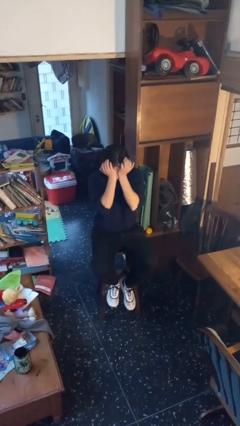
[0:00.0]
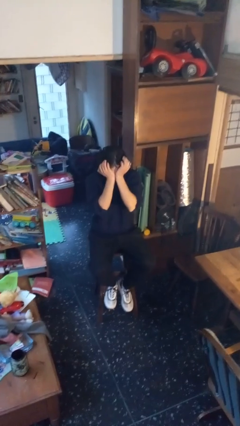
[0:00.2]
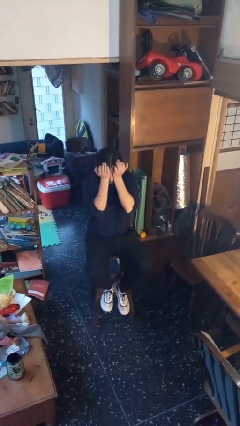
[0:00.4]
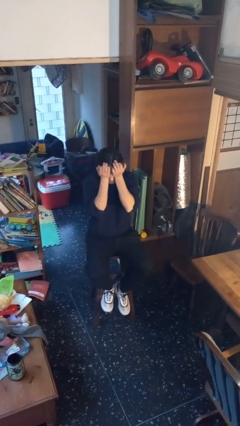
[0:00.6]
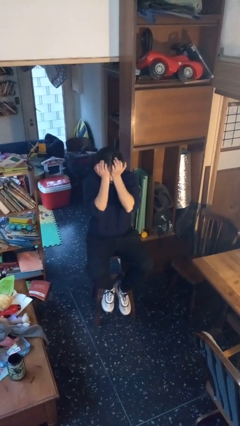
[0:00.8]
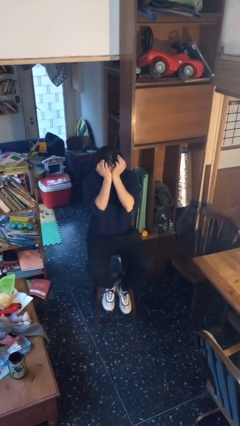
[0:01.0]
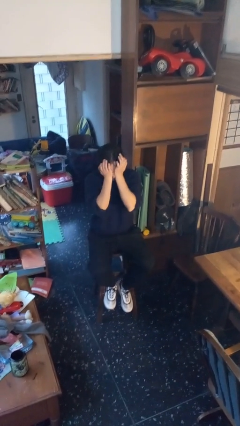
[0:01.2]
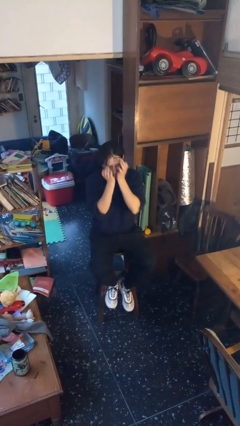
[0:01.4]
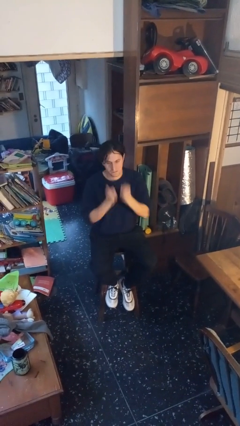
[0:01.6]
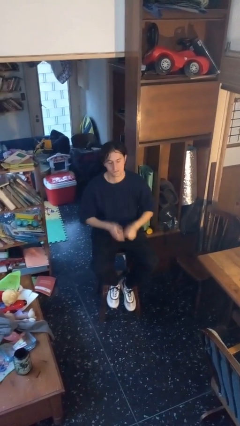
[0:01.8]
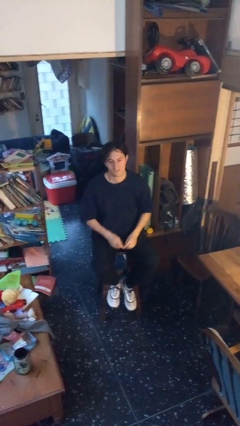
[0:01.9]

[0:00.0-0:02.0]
person rubs eyes

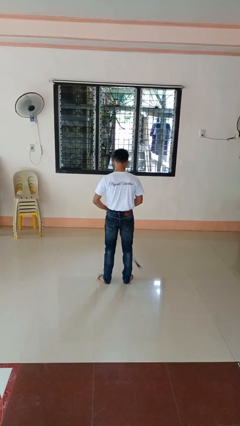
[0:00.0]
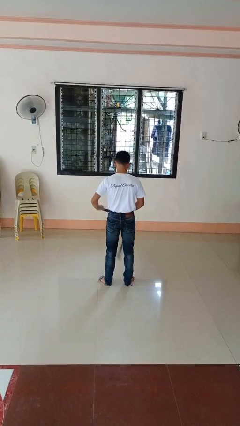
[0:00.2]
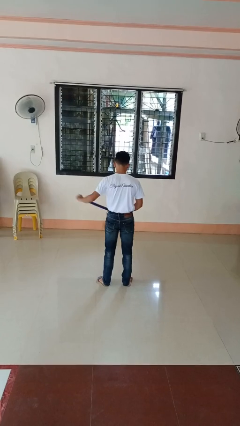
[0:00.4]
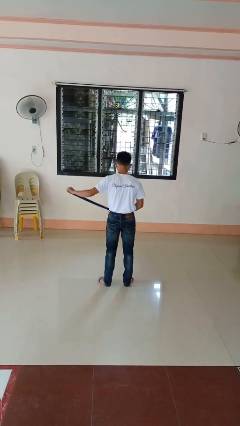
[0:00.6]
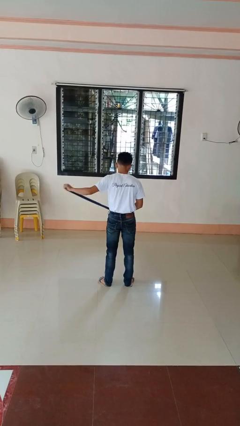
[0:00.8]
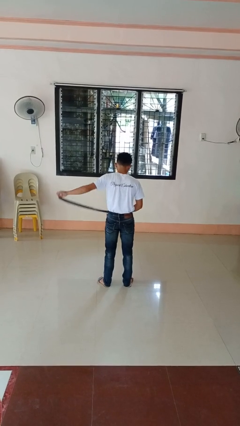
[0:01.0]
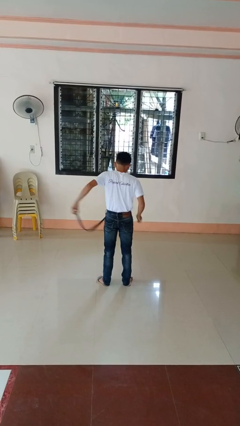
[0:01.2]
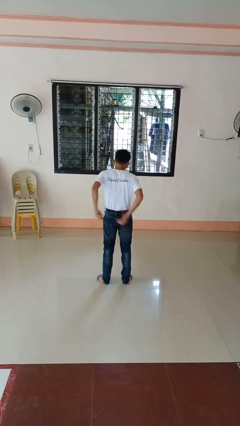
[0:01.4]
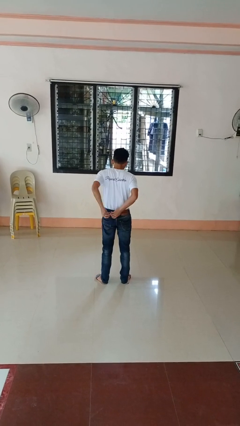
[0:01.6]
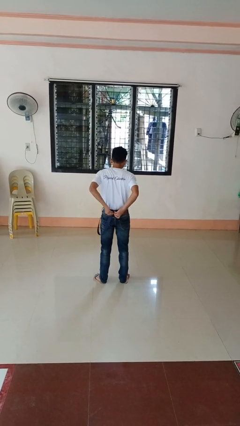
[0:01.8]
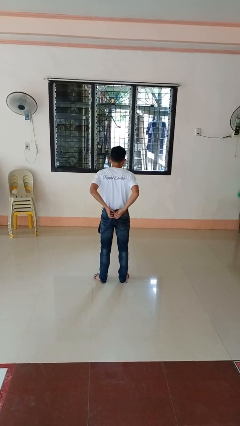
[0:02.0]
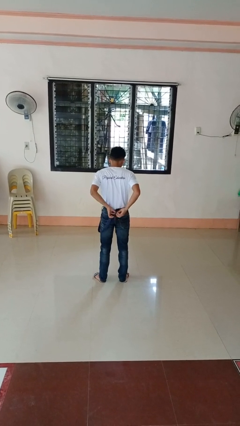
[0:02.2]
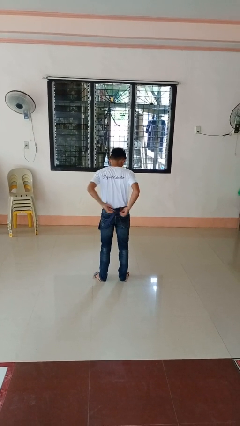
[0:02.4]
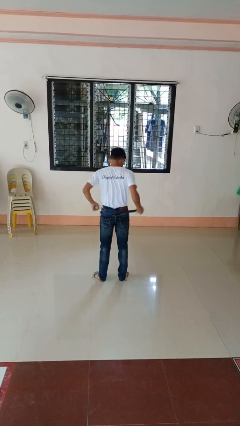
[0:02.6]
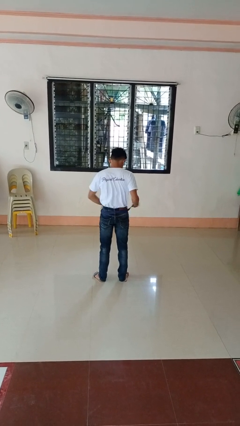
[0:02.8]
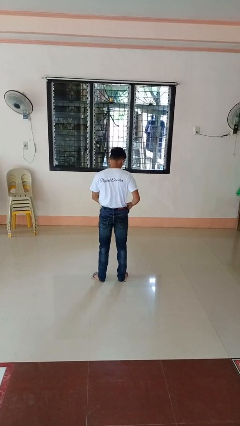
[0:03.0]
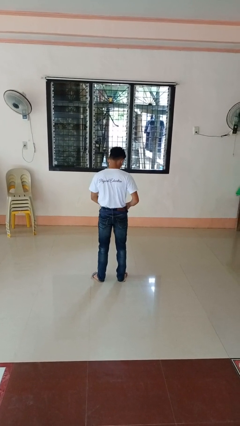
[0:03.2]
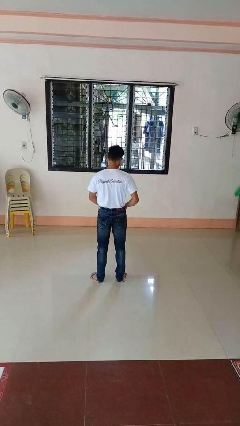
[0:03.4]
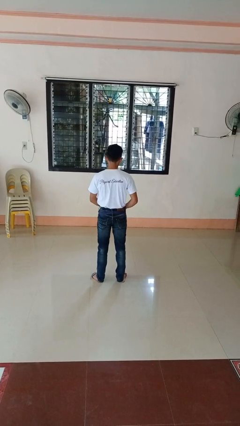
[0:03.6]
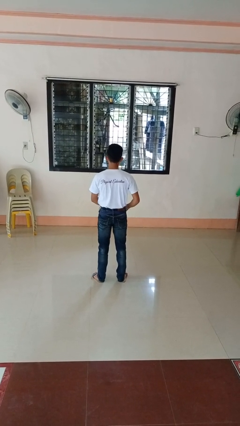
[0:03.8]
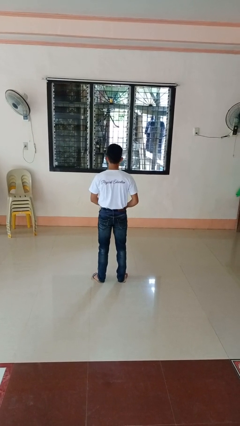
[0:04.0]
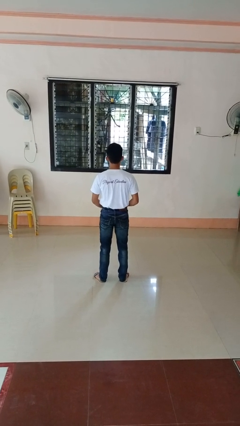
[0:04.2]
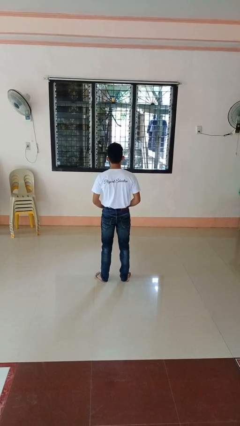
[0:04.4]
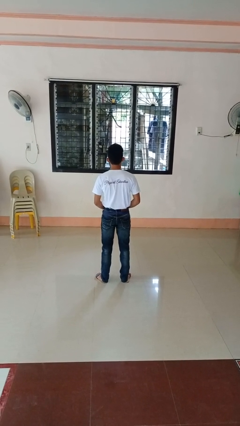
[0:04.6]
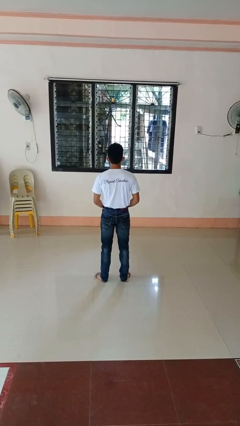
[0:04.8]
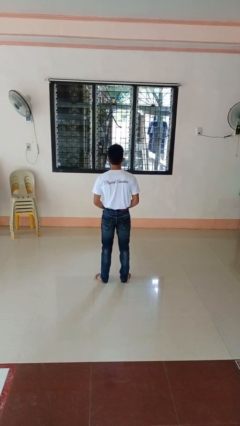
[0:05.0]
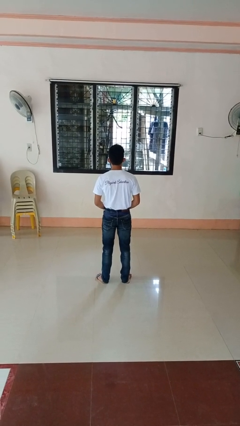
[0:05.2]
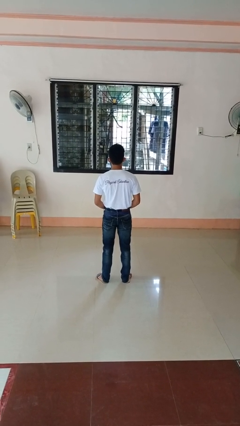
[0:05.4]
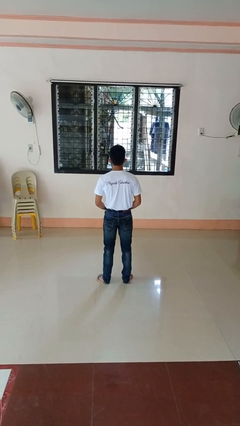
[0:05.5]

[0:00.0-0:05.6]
person puts on belt

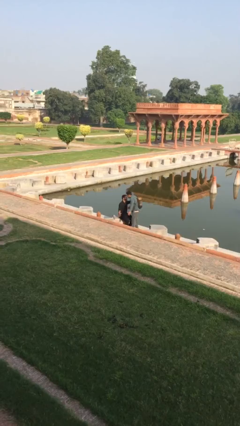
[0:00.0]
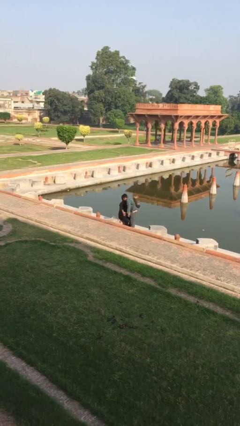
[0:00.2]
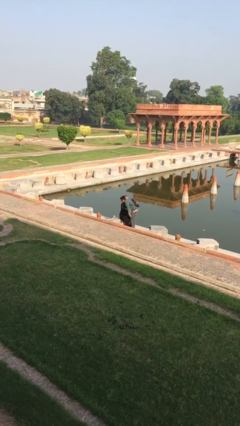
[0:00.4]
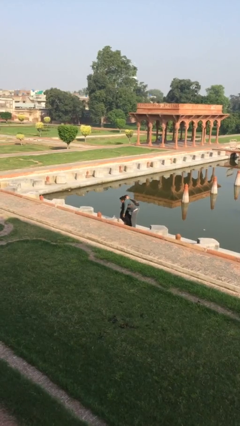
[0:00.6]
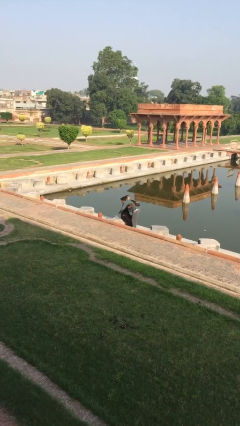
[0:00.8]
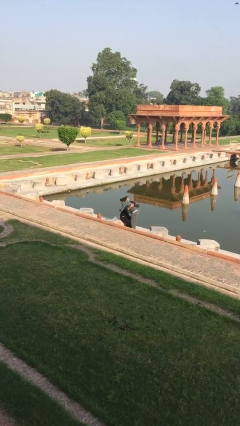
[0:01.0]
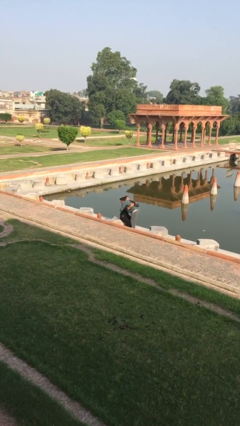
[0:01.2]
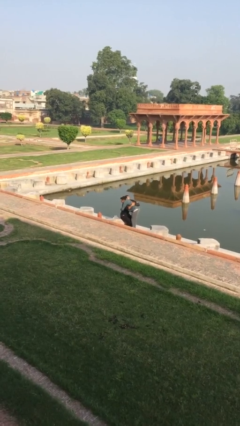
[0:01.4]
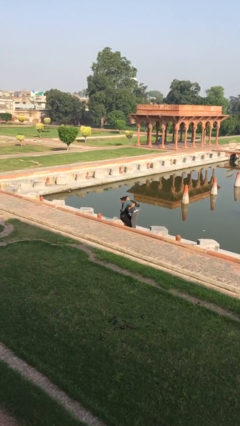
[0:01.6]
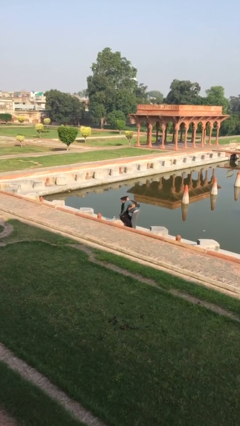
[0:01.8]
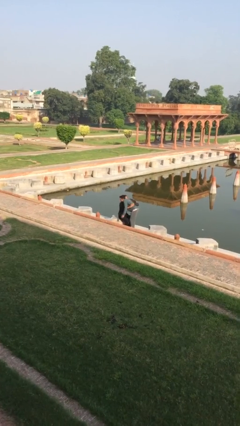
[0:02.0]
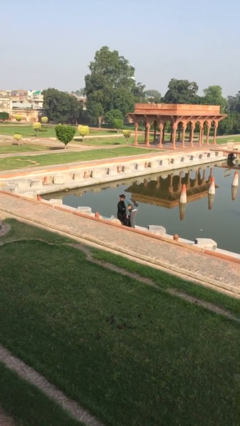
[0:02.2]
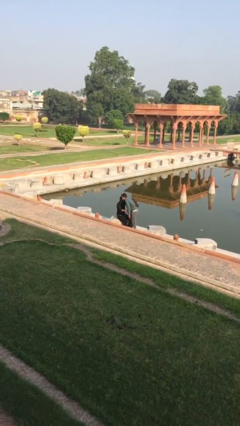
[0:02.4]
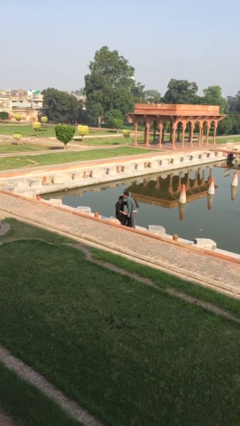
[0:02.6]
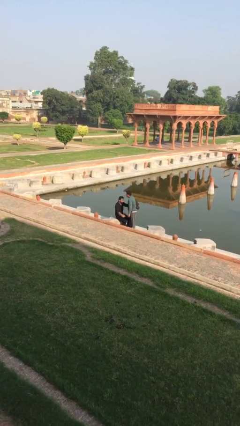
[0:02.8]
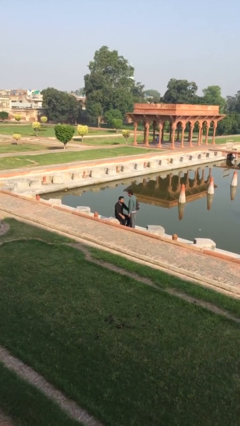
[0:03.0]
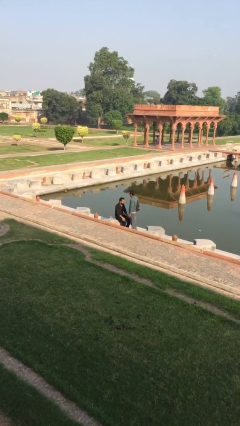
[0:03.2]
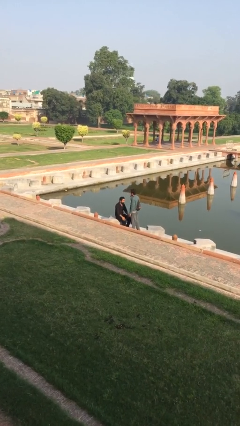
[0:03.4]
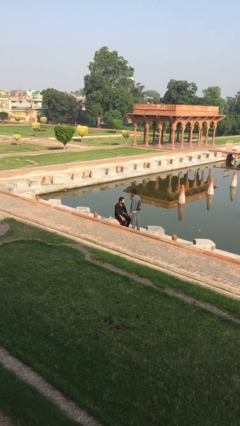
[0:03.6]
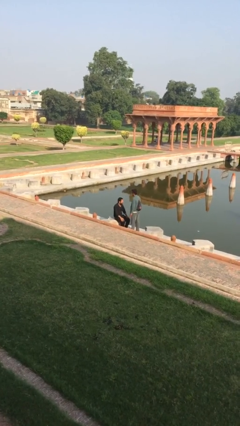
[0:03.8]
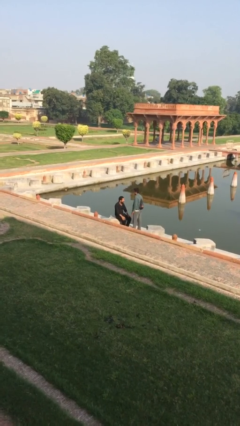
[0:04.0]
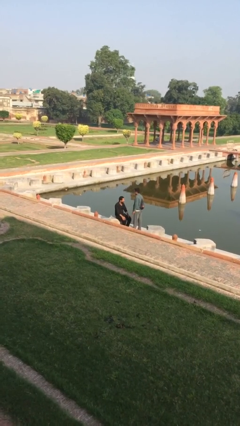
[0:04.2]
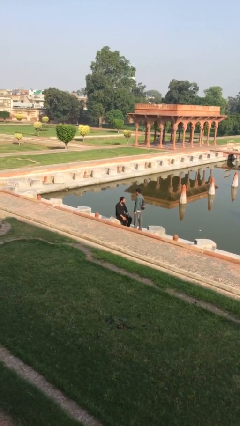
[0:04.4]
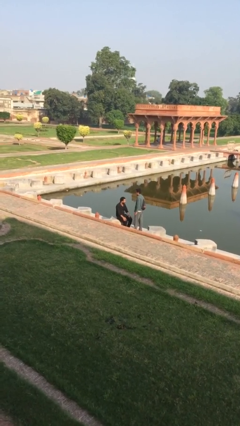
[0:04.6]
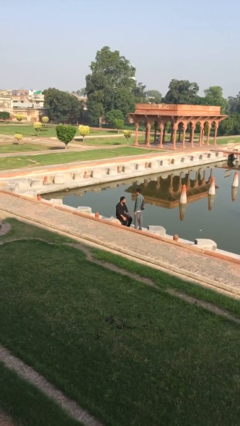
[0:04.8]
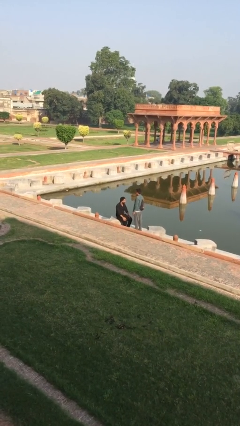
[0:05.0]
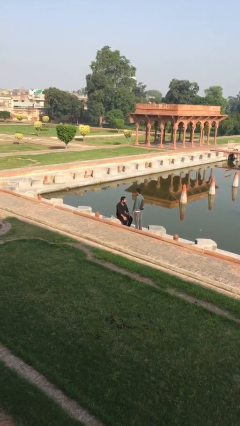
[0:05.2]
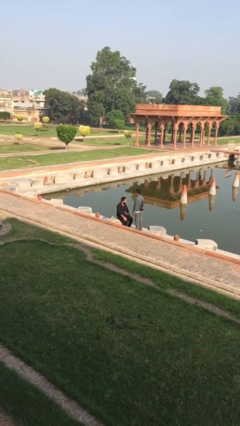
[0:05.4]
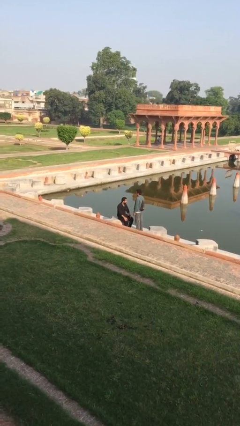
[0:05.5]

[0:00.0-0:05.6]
person embraces person

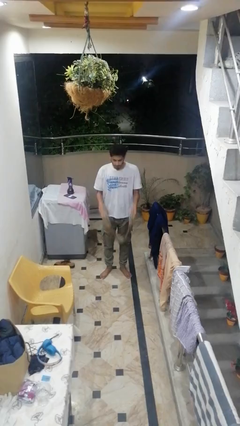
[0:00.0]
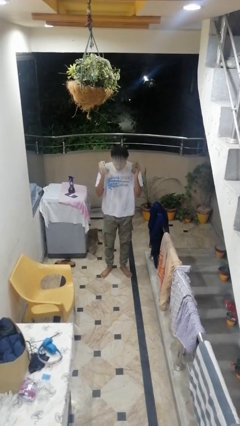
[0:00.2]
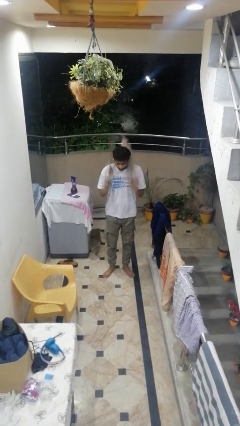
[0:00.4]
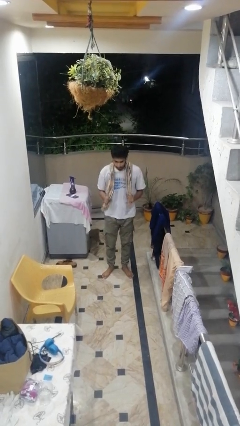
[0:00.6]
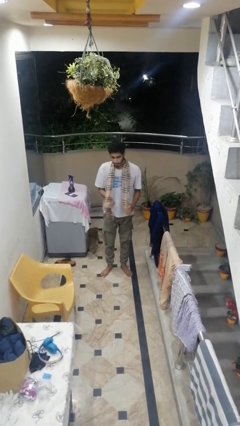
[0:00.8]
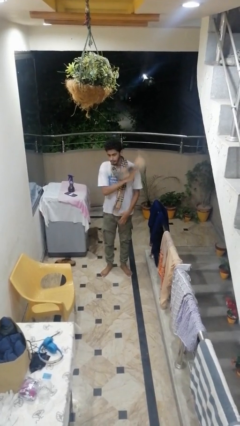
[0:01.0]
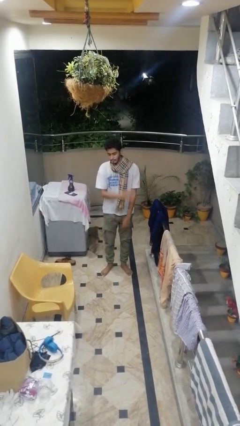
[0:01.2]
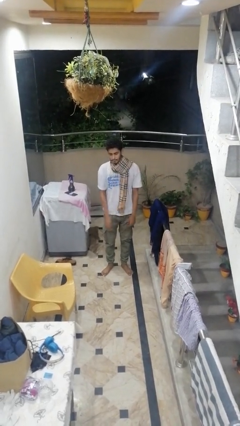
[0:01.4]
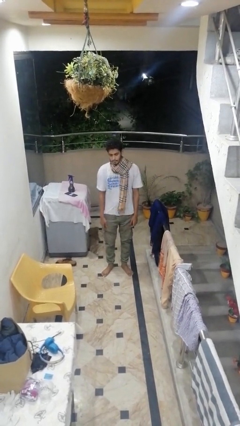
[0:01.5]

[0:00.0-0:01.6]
person puts on scarf

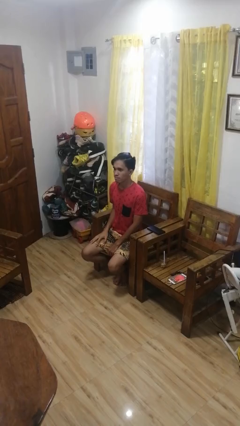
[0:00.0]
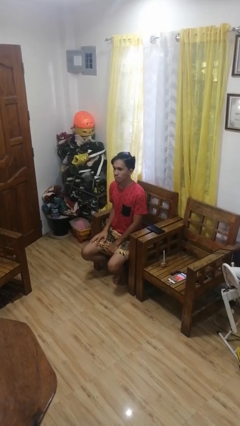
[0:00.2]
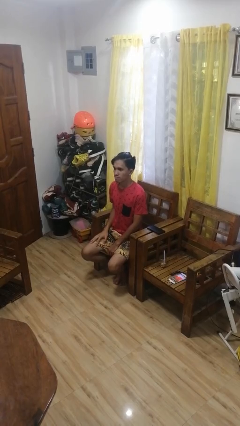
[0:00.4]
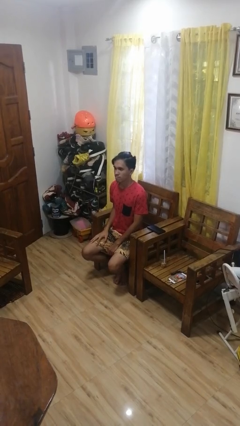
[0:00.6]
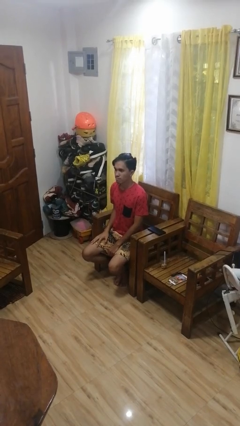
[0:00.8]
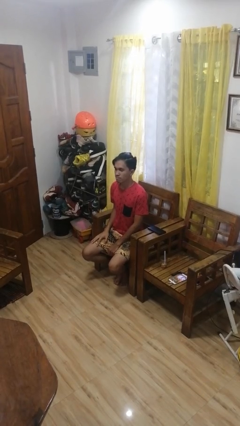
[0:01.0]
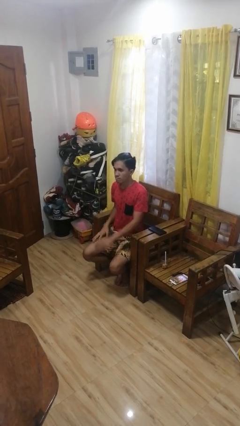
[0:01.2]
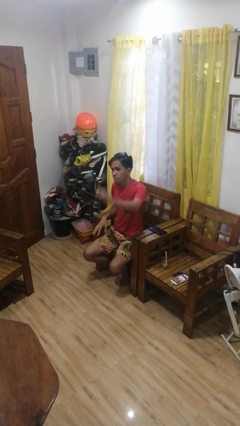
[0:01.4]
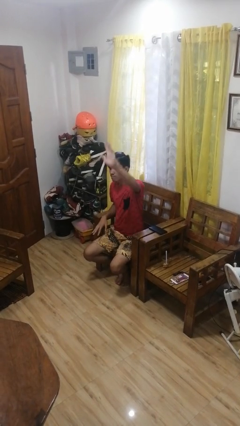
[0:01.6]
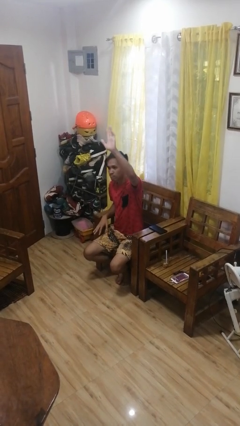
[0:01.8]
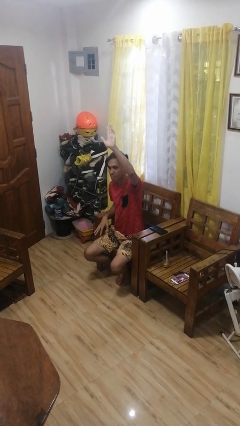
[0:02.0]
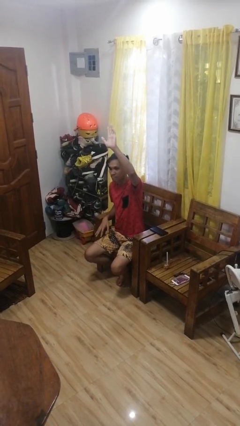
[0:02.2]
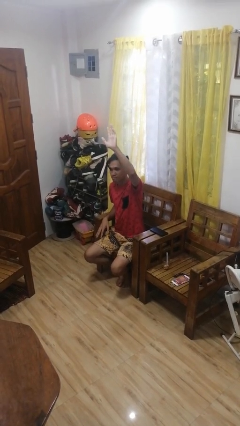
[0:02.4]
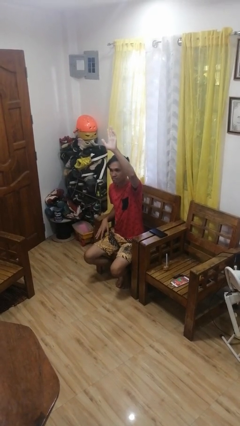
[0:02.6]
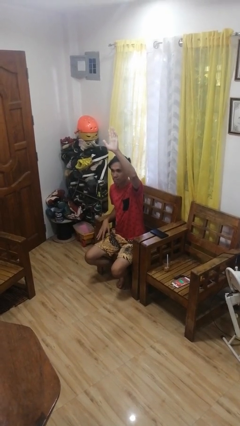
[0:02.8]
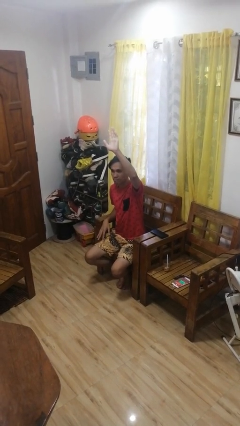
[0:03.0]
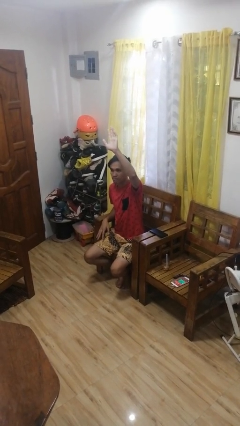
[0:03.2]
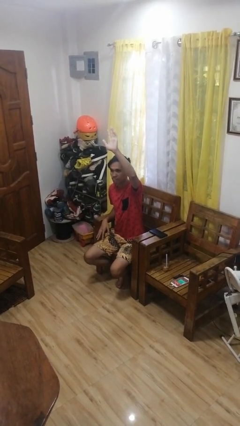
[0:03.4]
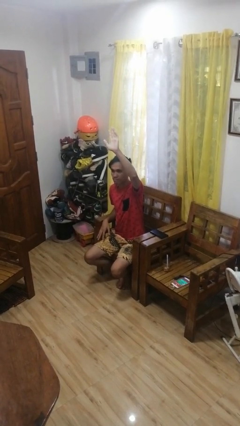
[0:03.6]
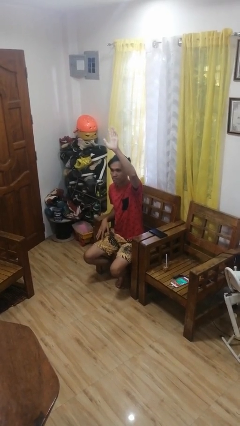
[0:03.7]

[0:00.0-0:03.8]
person gestures raise hand
